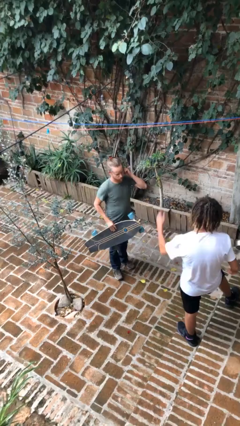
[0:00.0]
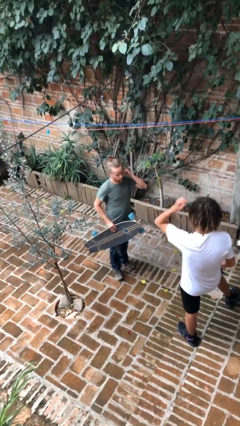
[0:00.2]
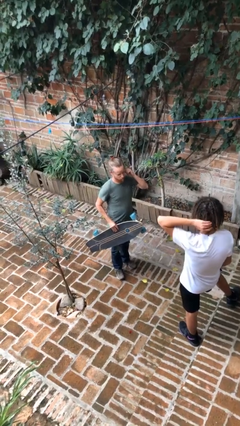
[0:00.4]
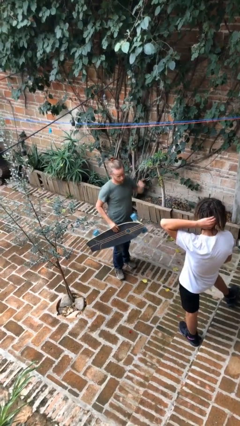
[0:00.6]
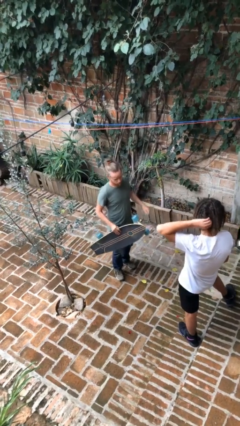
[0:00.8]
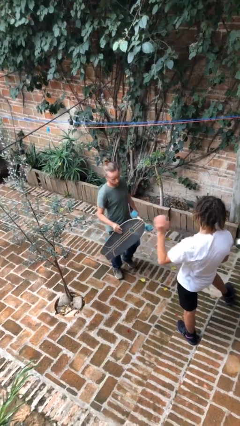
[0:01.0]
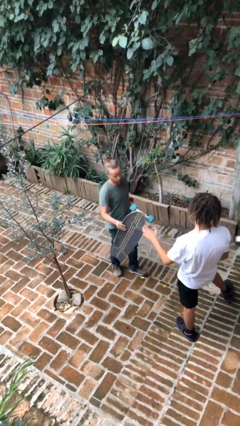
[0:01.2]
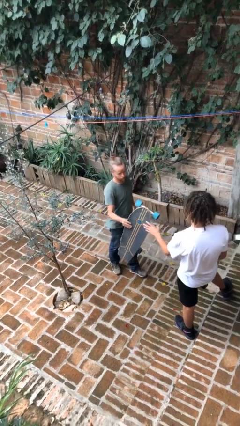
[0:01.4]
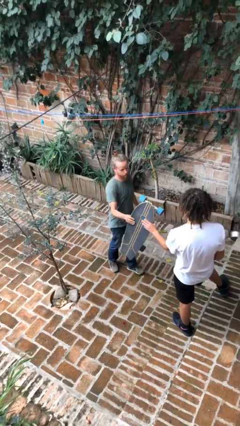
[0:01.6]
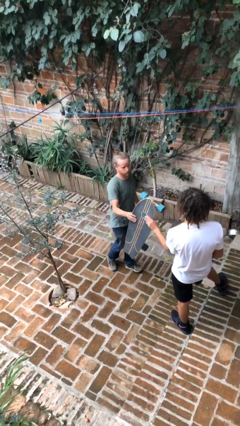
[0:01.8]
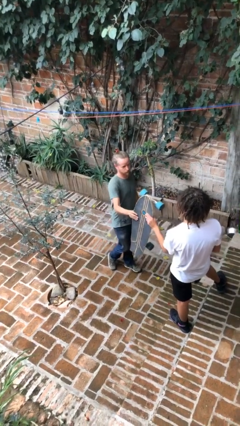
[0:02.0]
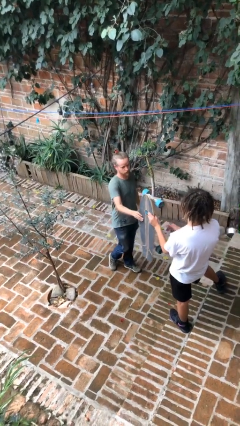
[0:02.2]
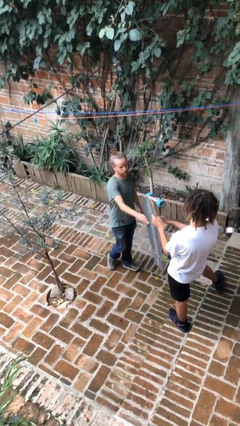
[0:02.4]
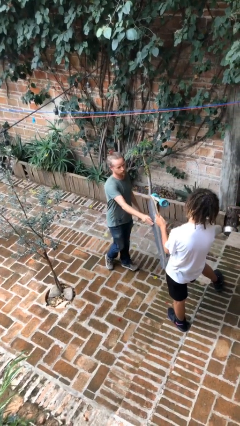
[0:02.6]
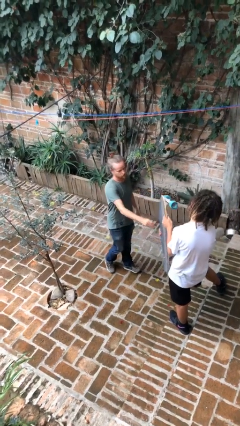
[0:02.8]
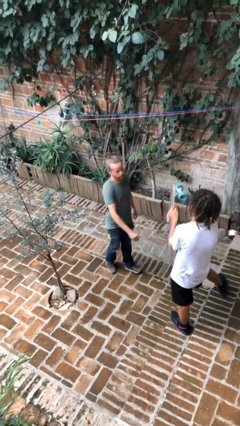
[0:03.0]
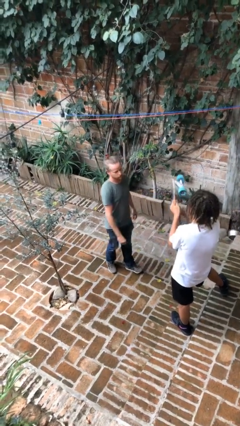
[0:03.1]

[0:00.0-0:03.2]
person transfers object to person

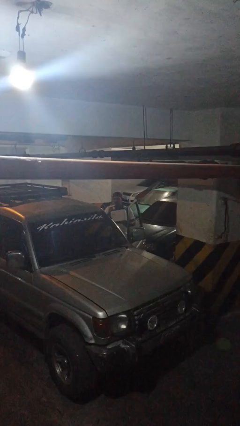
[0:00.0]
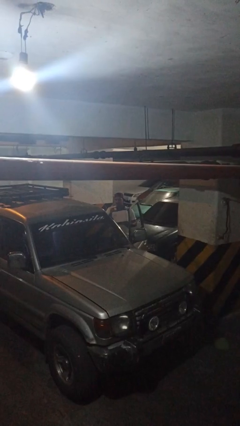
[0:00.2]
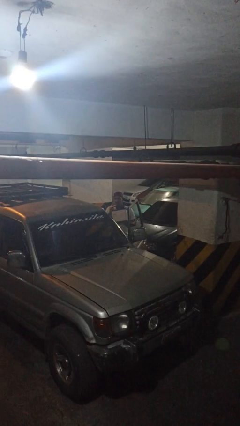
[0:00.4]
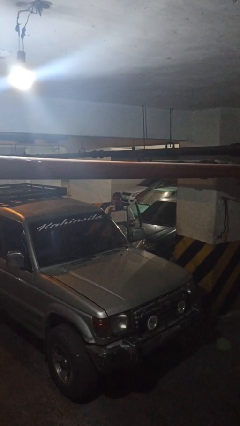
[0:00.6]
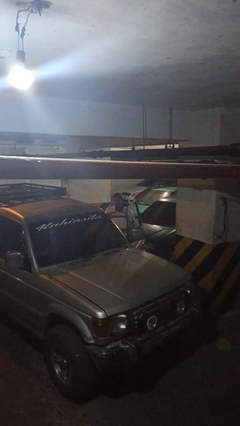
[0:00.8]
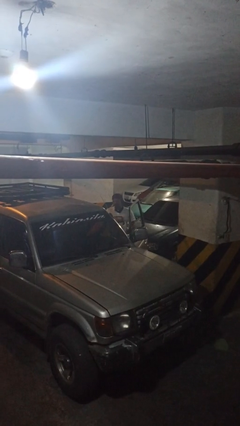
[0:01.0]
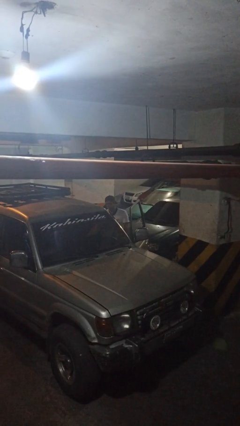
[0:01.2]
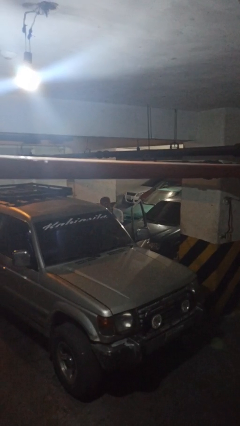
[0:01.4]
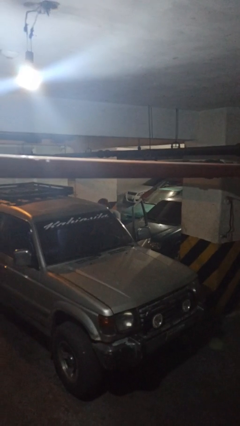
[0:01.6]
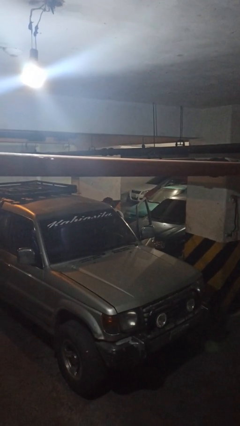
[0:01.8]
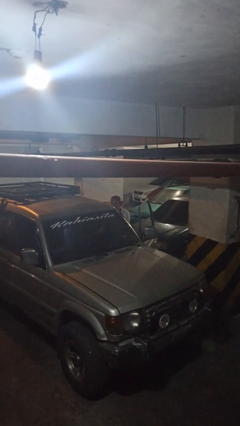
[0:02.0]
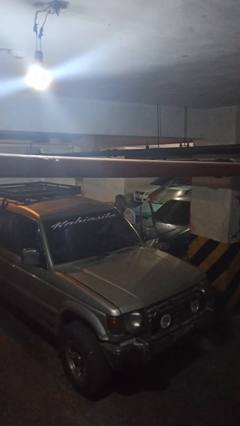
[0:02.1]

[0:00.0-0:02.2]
person loads car

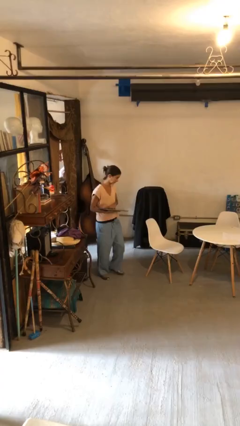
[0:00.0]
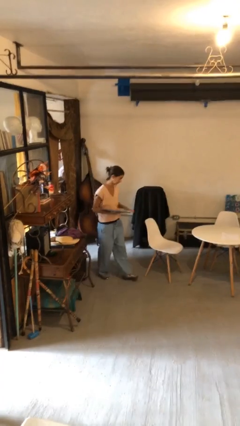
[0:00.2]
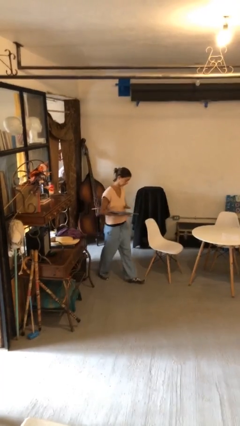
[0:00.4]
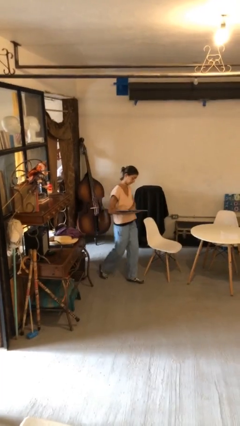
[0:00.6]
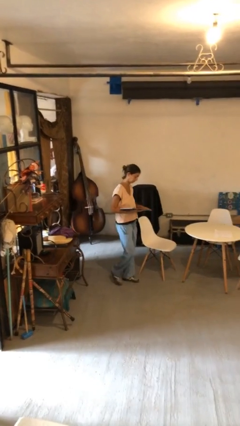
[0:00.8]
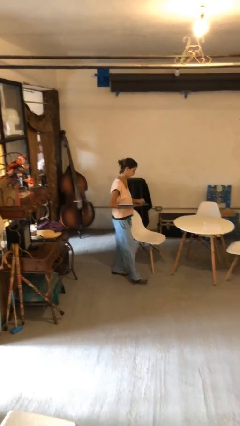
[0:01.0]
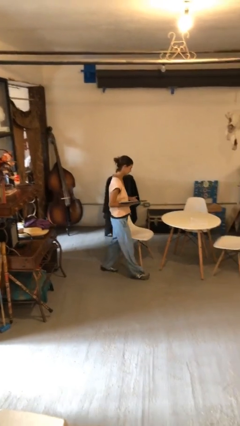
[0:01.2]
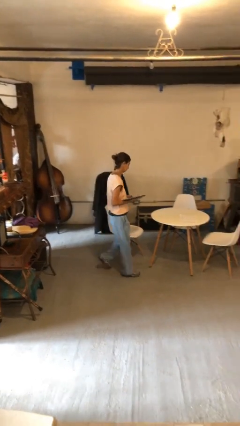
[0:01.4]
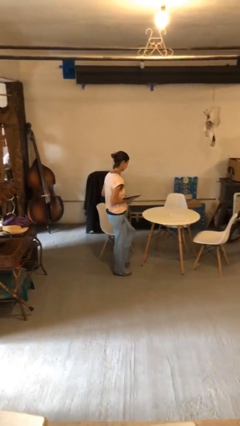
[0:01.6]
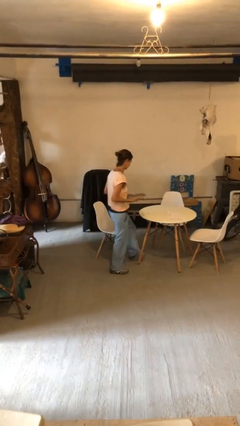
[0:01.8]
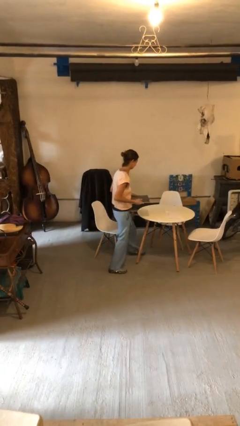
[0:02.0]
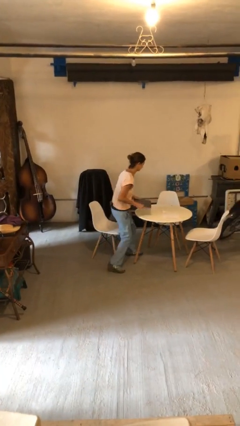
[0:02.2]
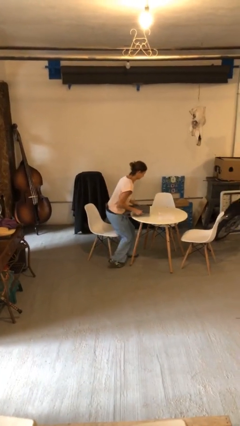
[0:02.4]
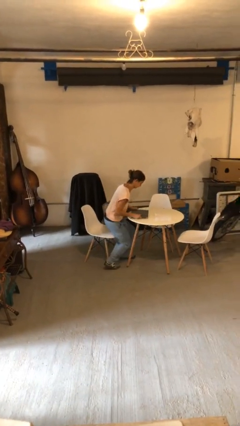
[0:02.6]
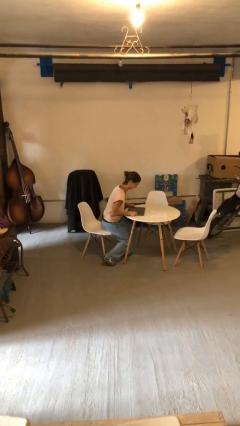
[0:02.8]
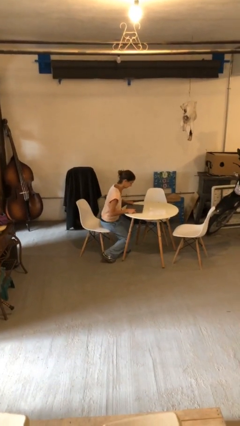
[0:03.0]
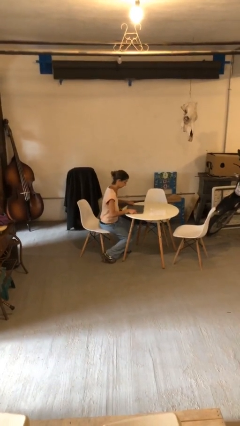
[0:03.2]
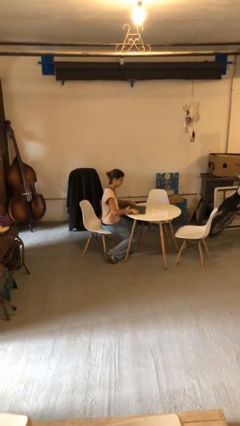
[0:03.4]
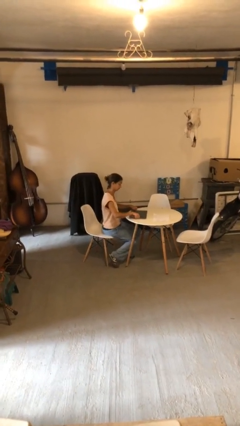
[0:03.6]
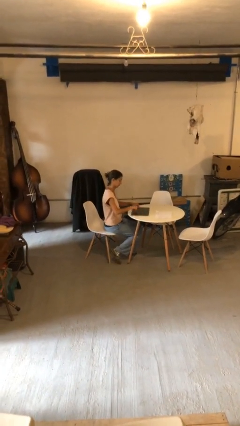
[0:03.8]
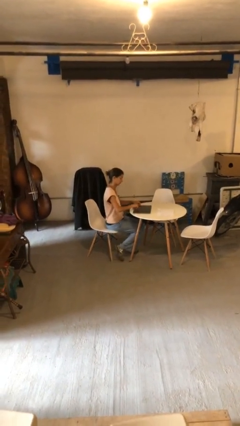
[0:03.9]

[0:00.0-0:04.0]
person sits down

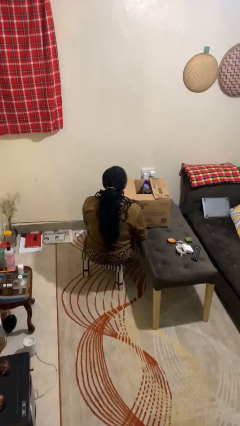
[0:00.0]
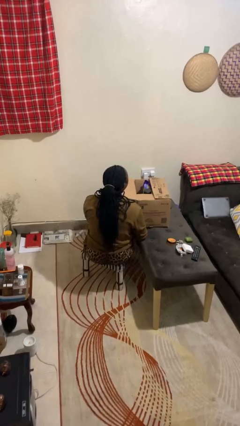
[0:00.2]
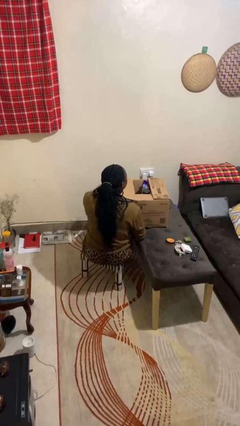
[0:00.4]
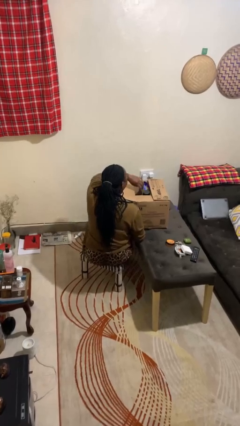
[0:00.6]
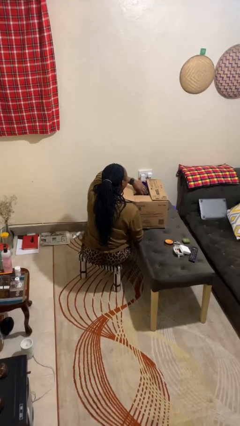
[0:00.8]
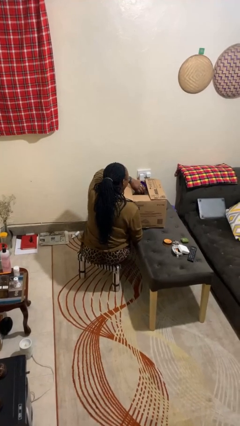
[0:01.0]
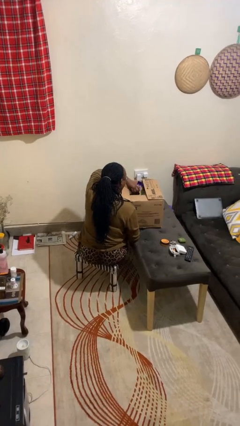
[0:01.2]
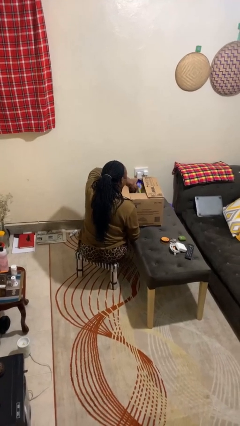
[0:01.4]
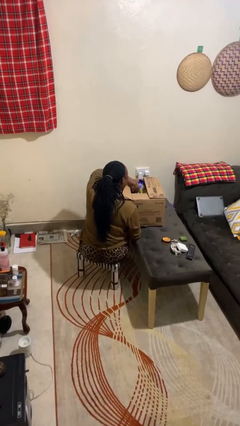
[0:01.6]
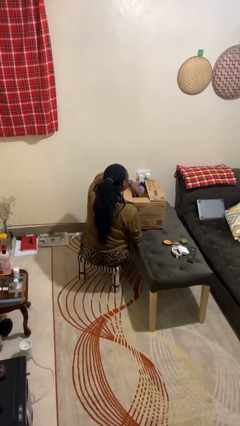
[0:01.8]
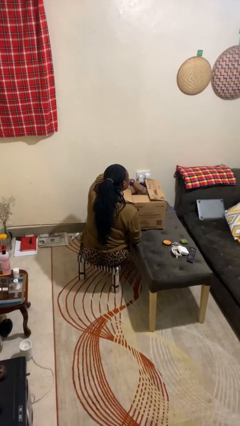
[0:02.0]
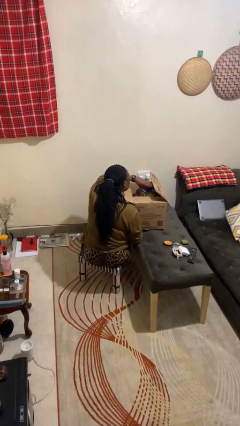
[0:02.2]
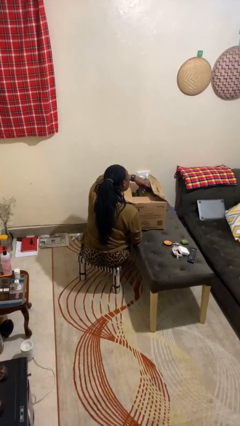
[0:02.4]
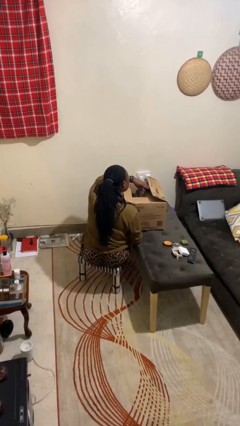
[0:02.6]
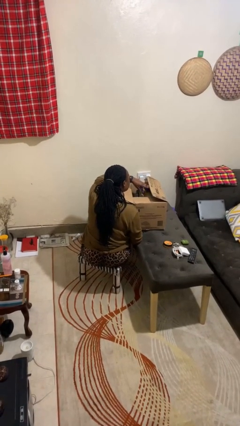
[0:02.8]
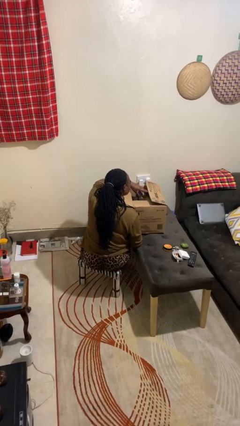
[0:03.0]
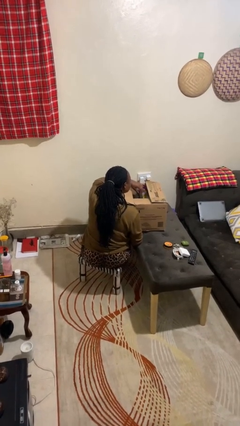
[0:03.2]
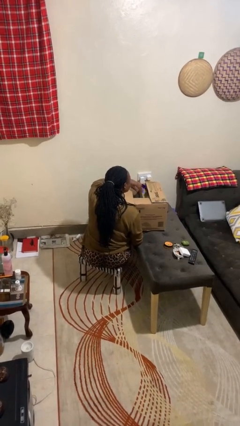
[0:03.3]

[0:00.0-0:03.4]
person searches in box

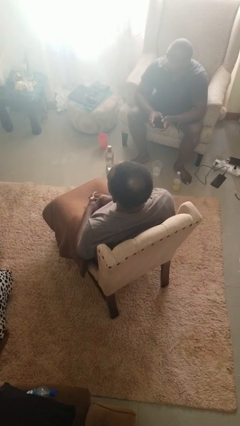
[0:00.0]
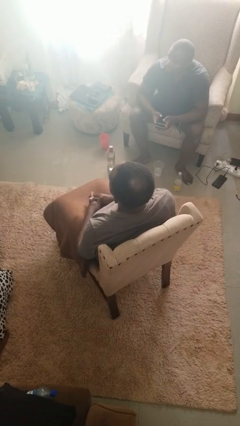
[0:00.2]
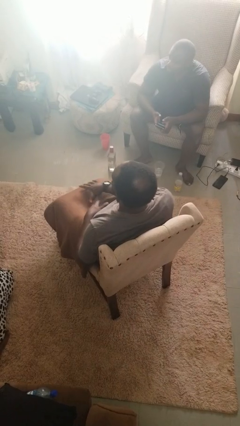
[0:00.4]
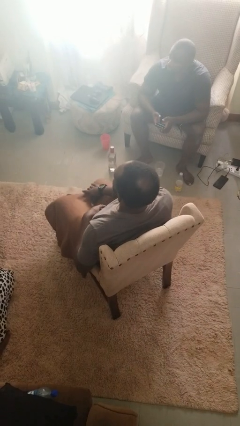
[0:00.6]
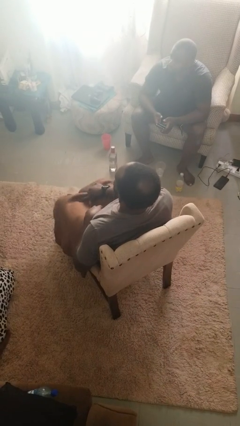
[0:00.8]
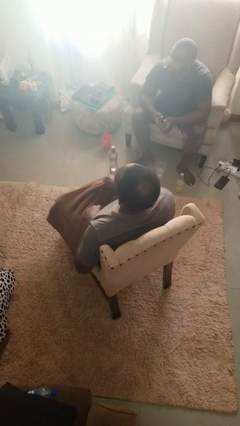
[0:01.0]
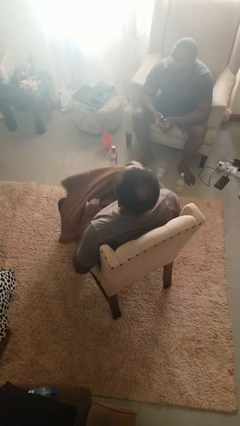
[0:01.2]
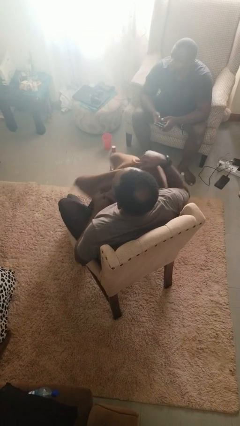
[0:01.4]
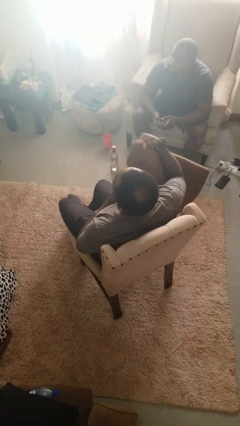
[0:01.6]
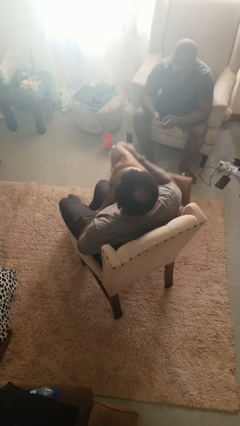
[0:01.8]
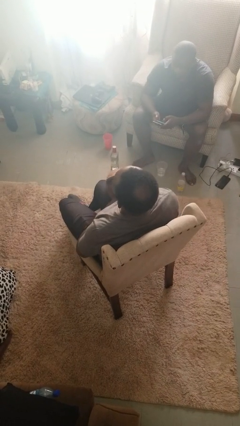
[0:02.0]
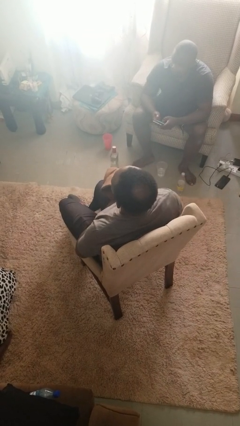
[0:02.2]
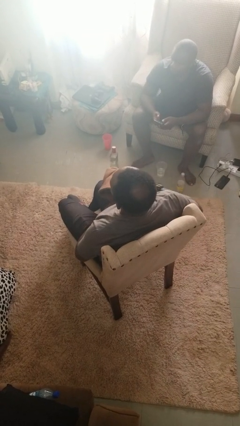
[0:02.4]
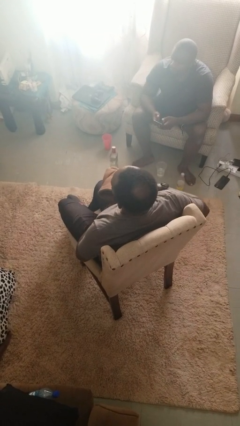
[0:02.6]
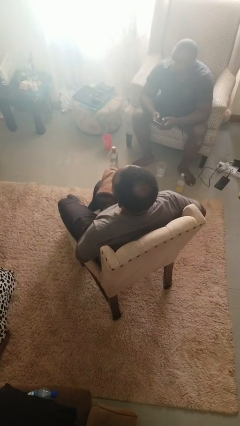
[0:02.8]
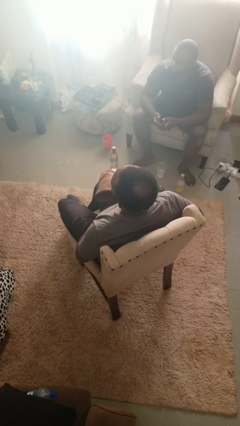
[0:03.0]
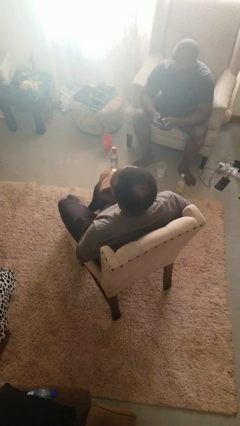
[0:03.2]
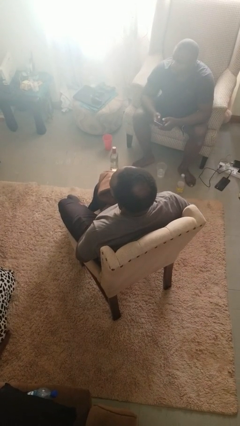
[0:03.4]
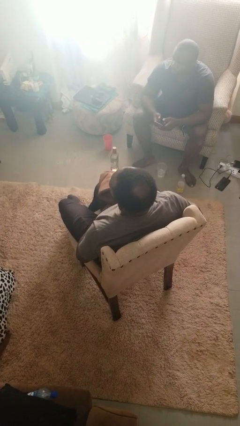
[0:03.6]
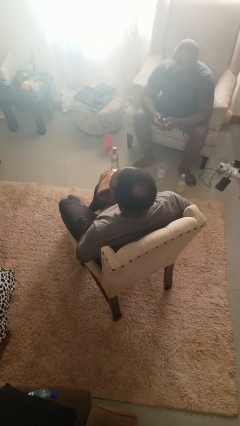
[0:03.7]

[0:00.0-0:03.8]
person uncovers with blanket

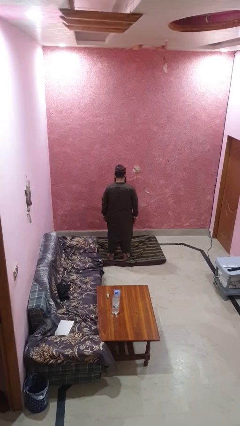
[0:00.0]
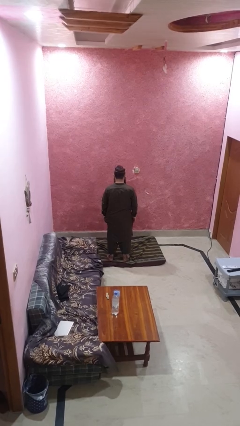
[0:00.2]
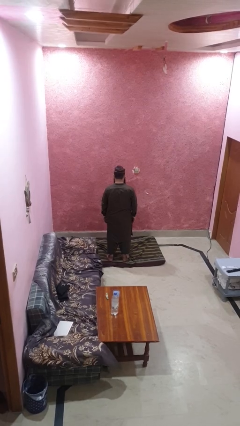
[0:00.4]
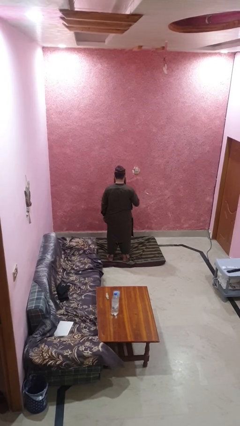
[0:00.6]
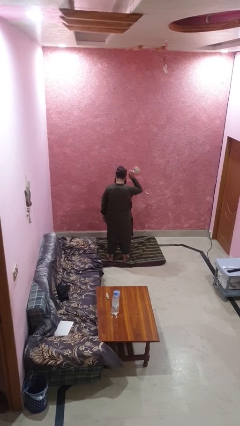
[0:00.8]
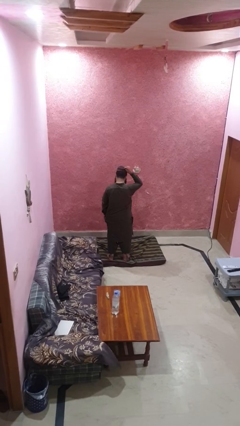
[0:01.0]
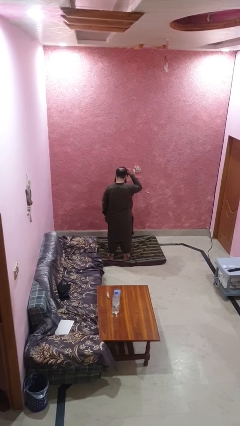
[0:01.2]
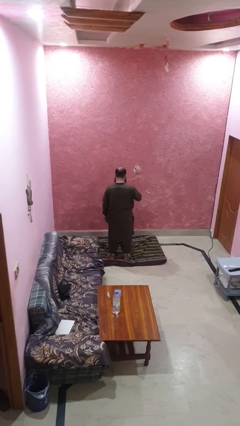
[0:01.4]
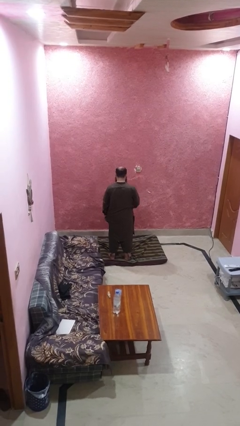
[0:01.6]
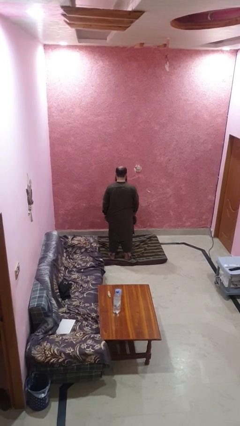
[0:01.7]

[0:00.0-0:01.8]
person takes off hat
